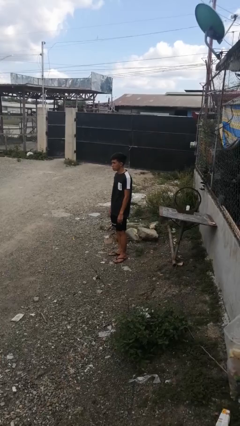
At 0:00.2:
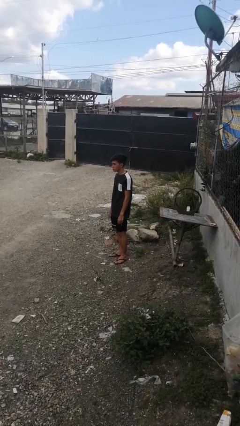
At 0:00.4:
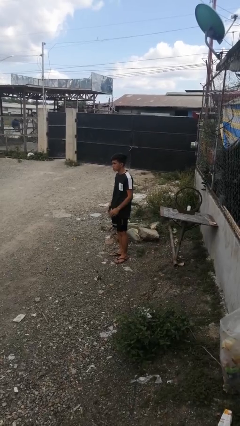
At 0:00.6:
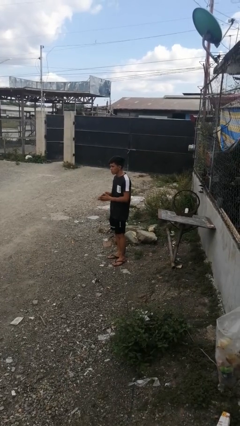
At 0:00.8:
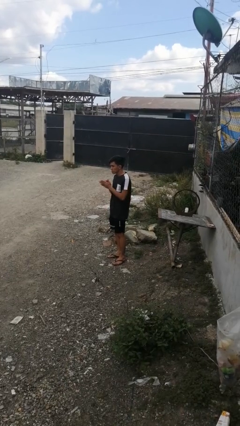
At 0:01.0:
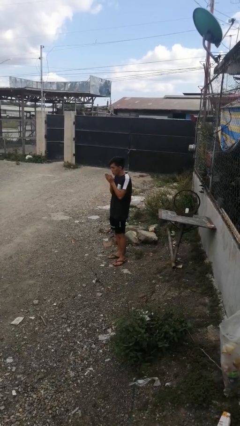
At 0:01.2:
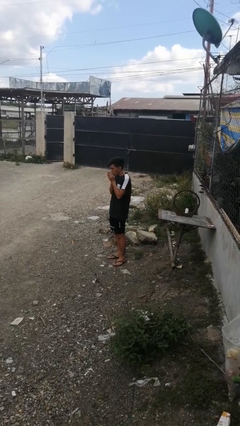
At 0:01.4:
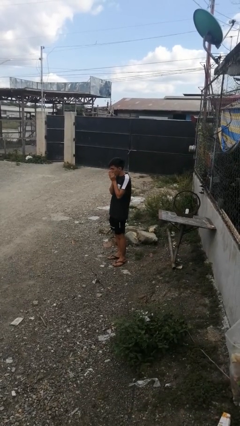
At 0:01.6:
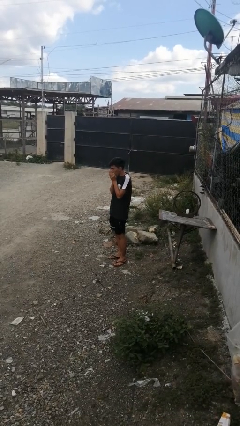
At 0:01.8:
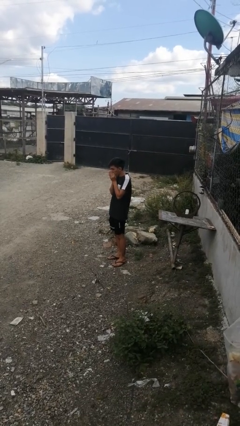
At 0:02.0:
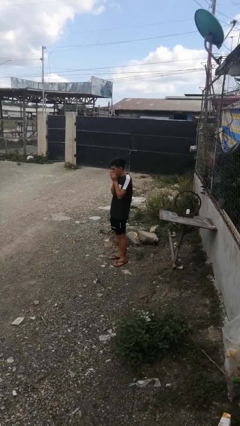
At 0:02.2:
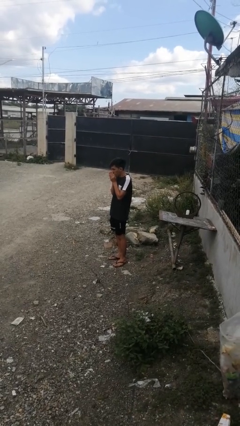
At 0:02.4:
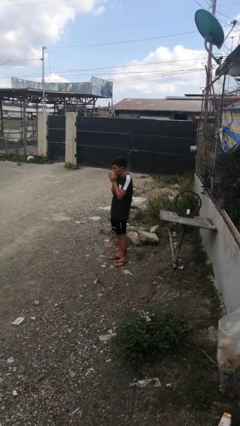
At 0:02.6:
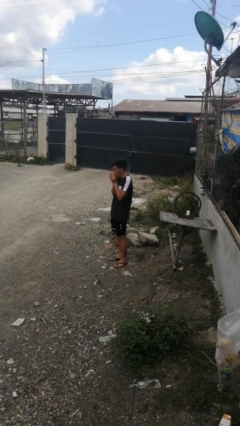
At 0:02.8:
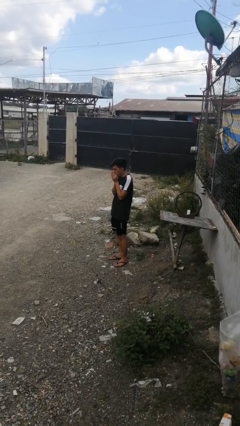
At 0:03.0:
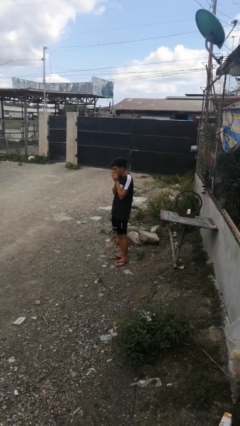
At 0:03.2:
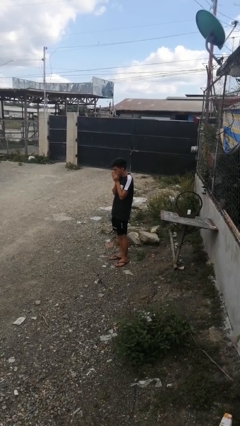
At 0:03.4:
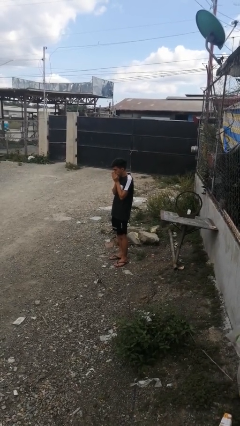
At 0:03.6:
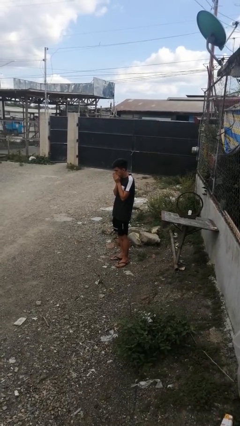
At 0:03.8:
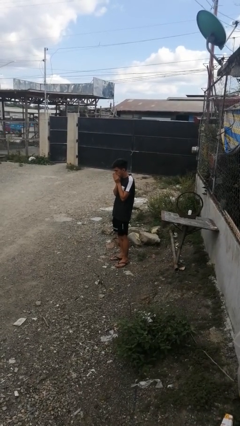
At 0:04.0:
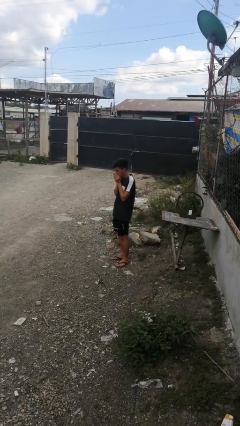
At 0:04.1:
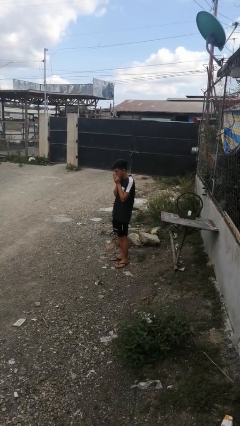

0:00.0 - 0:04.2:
person blows into hands

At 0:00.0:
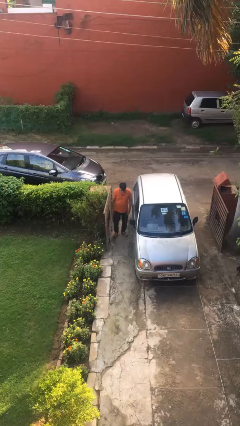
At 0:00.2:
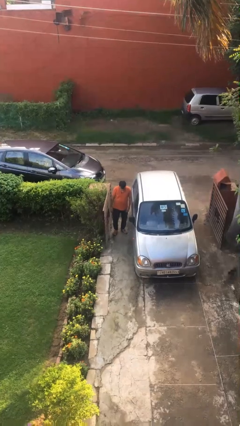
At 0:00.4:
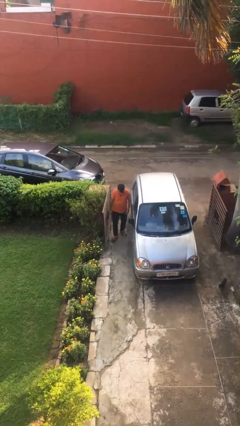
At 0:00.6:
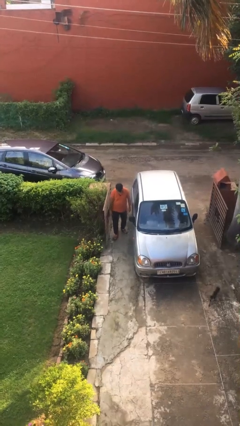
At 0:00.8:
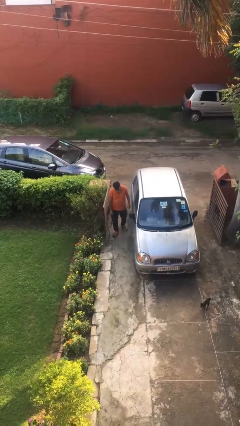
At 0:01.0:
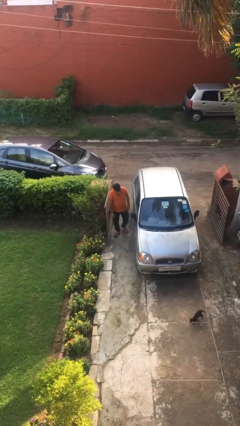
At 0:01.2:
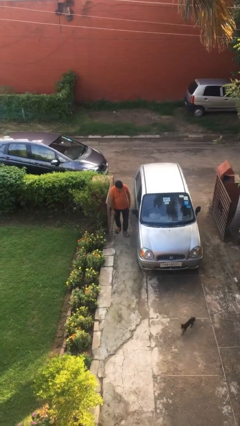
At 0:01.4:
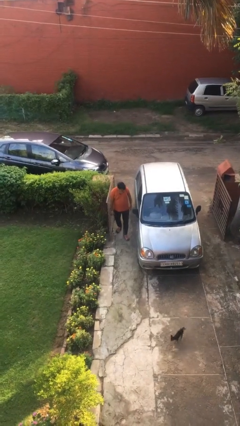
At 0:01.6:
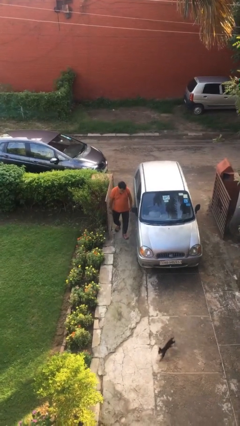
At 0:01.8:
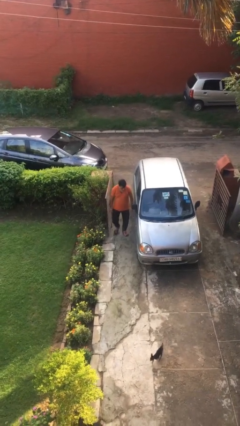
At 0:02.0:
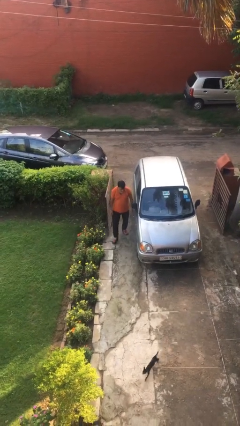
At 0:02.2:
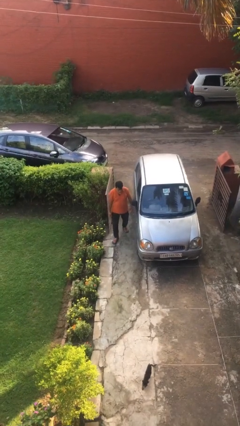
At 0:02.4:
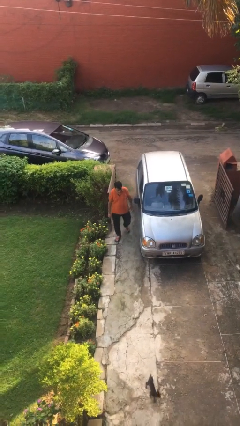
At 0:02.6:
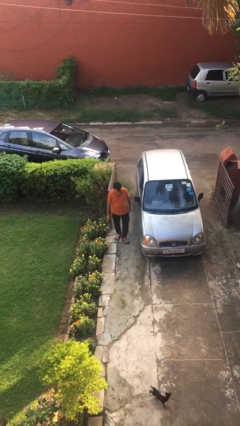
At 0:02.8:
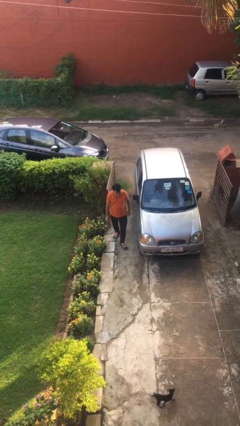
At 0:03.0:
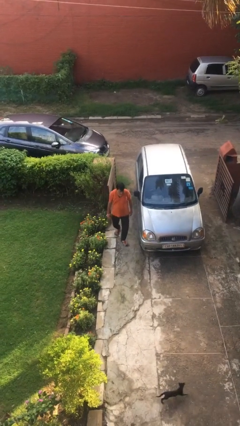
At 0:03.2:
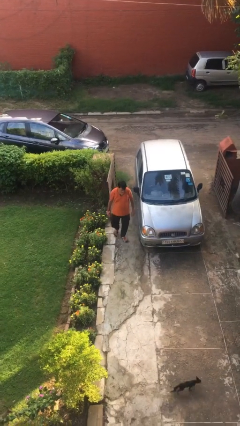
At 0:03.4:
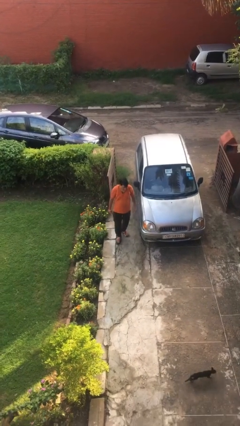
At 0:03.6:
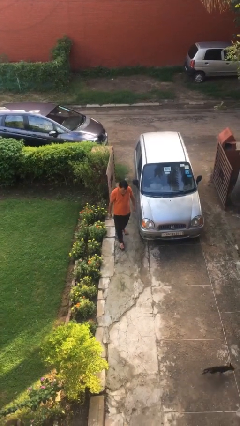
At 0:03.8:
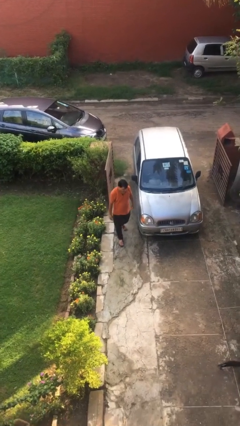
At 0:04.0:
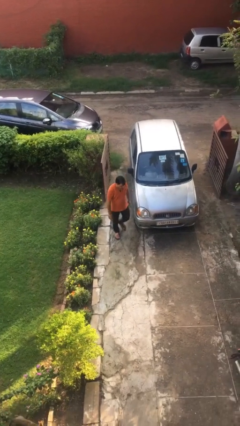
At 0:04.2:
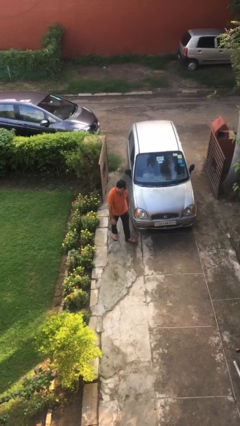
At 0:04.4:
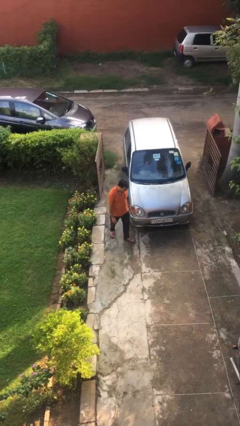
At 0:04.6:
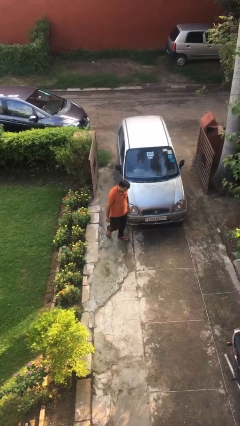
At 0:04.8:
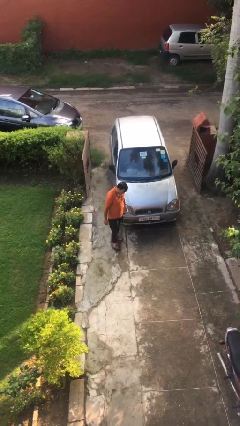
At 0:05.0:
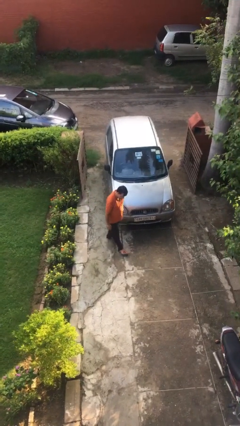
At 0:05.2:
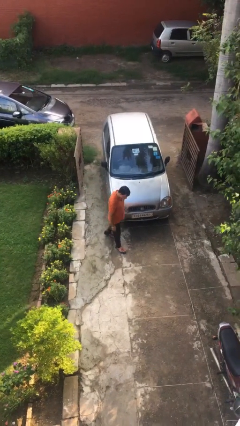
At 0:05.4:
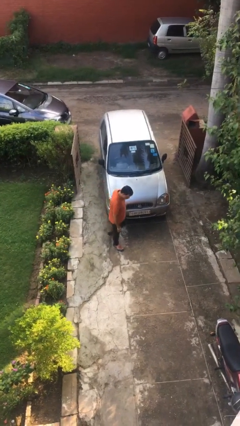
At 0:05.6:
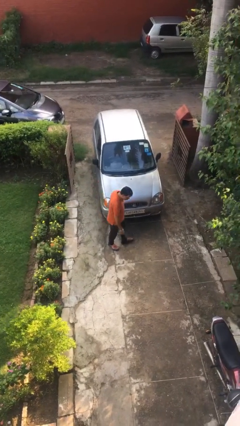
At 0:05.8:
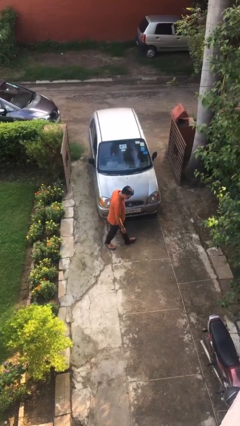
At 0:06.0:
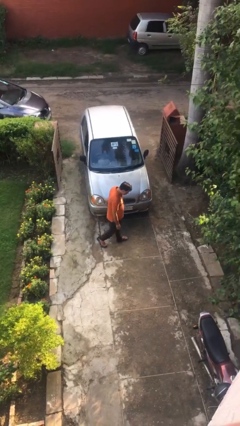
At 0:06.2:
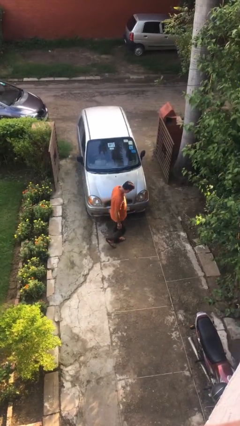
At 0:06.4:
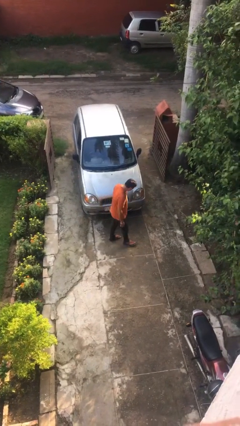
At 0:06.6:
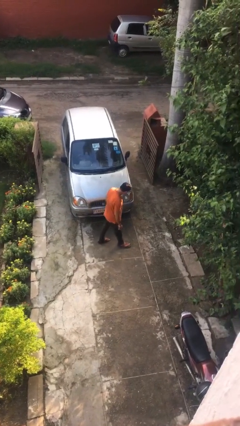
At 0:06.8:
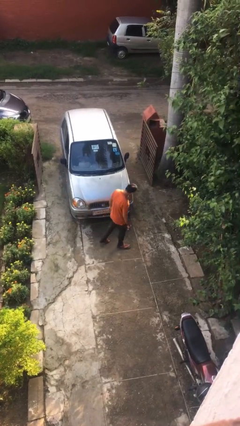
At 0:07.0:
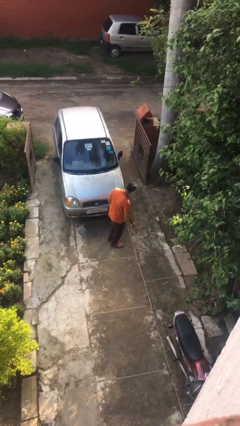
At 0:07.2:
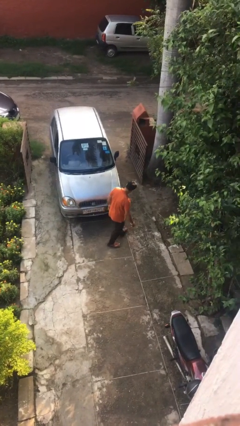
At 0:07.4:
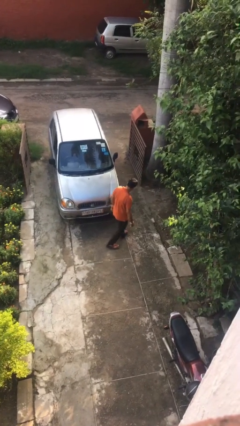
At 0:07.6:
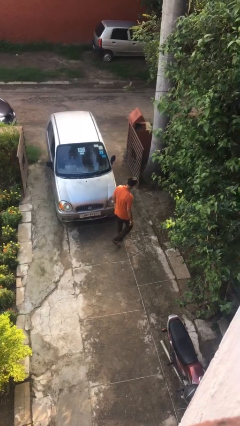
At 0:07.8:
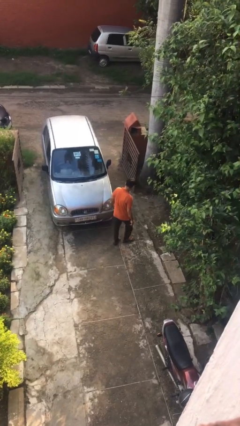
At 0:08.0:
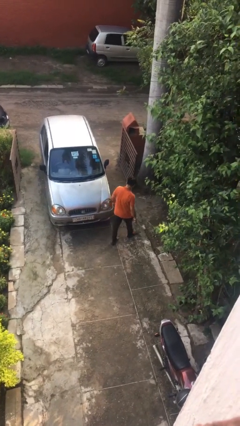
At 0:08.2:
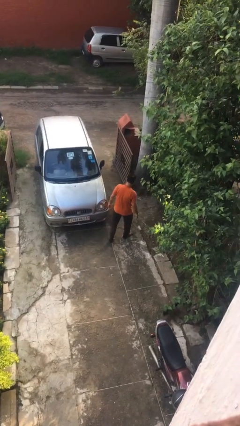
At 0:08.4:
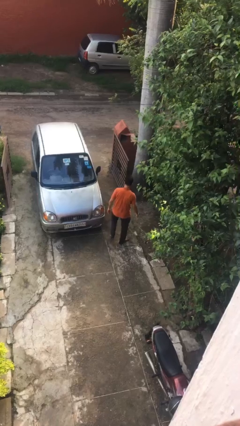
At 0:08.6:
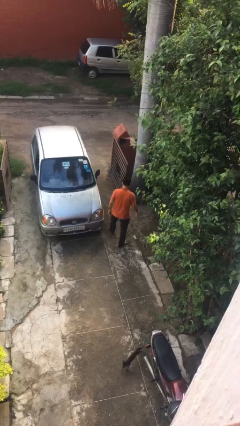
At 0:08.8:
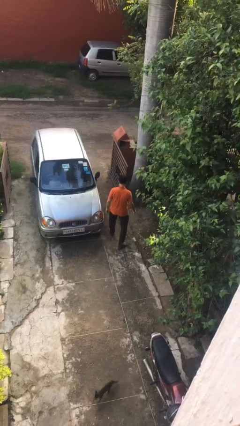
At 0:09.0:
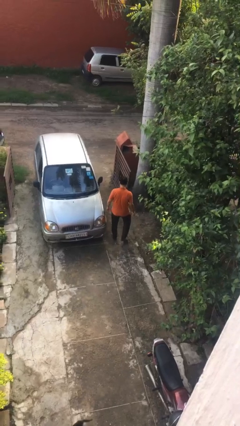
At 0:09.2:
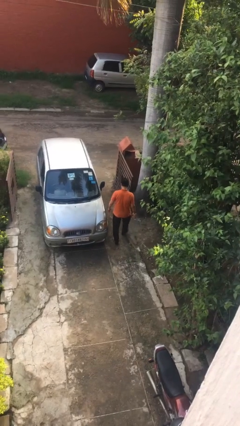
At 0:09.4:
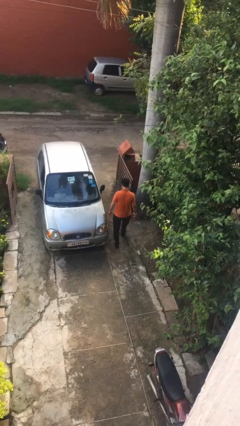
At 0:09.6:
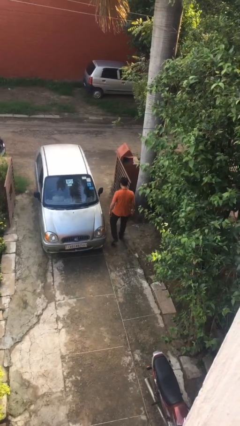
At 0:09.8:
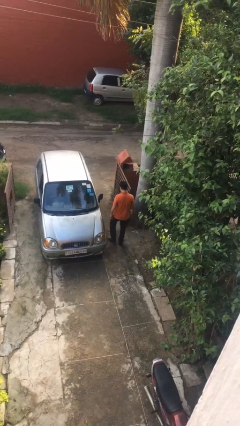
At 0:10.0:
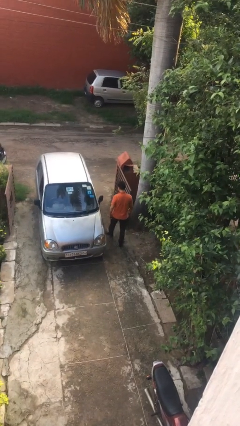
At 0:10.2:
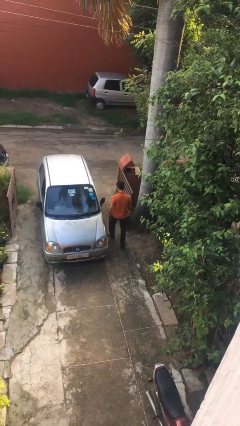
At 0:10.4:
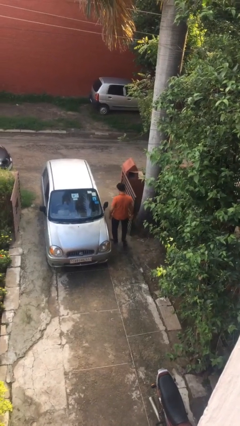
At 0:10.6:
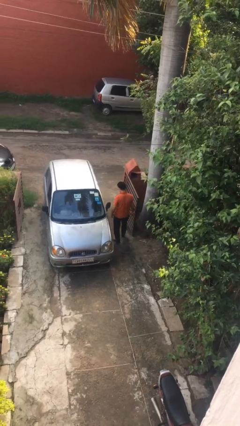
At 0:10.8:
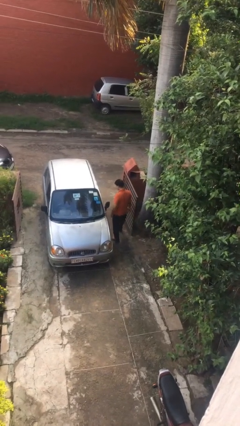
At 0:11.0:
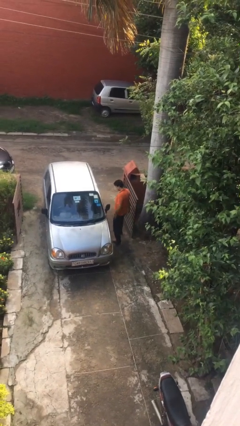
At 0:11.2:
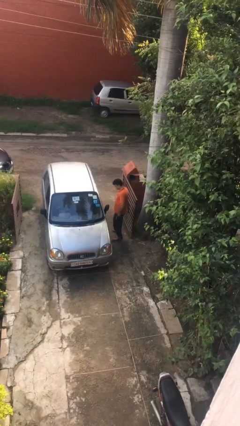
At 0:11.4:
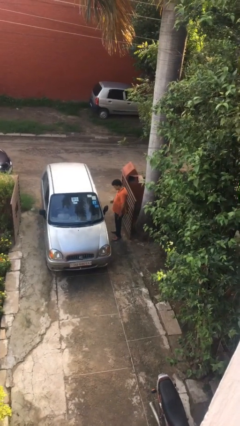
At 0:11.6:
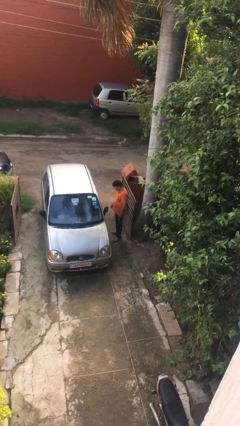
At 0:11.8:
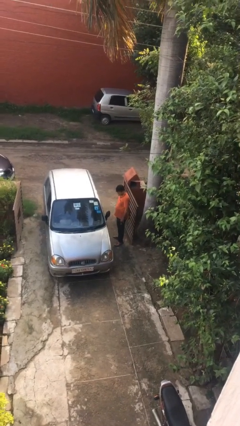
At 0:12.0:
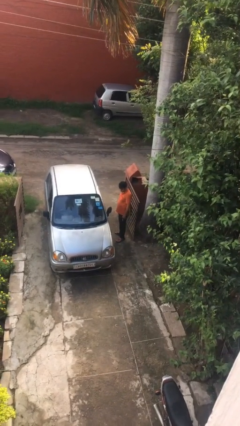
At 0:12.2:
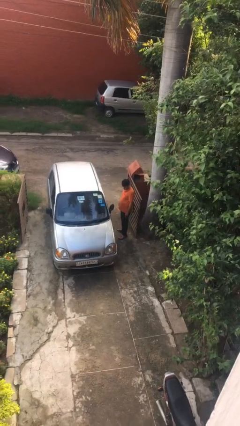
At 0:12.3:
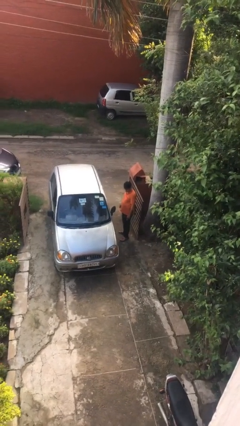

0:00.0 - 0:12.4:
person walks around car

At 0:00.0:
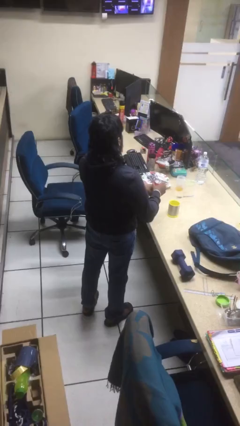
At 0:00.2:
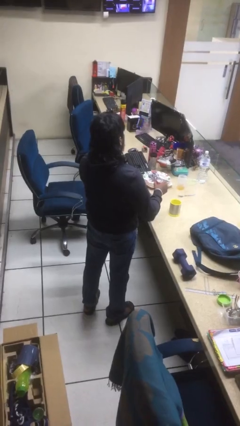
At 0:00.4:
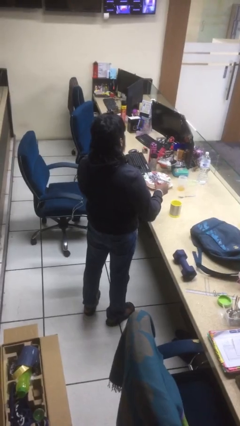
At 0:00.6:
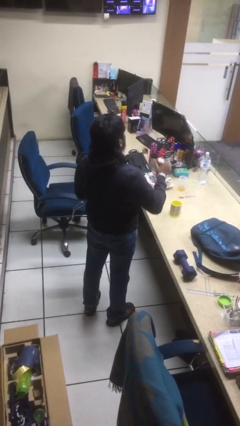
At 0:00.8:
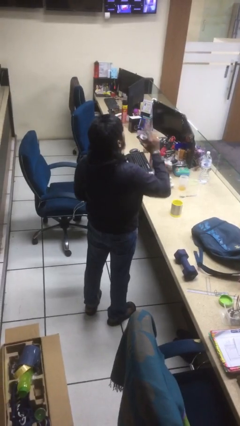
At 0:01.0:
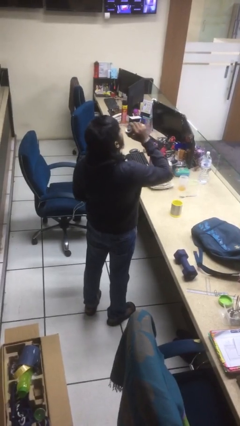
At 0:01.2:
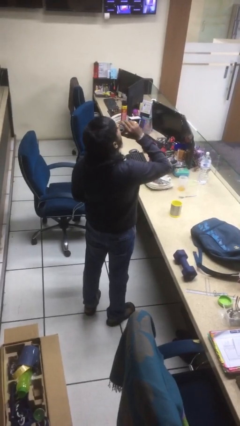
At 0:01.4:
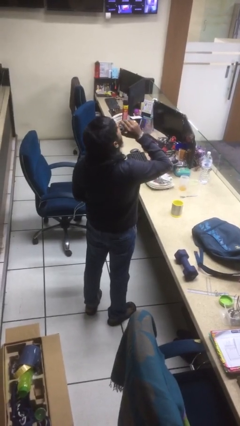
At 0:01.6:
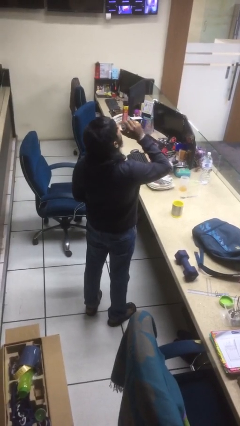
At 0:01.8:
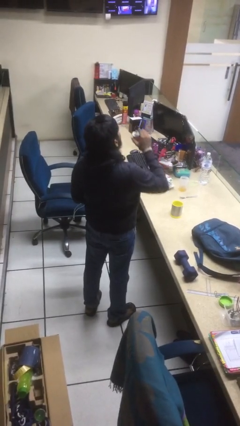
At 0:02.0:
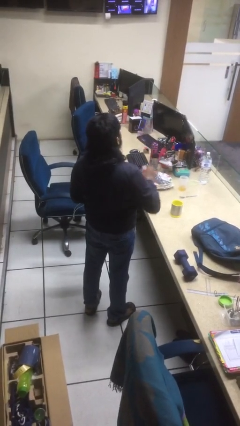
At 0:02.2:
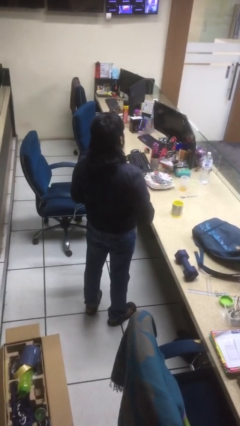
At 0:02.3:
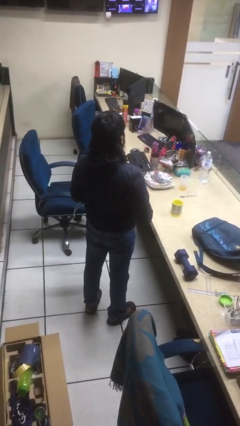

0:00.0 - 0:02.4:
person drinks from beverage can
